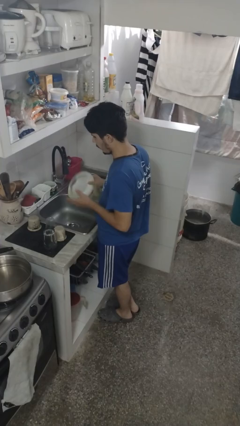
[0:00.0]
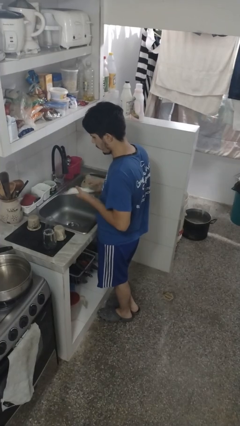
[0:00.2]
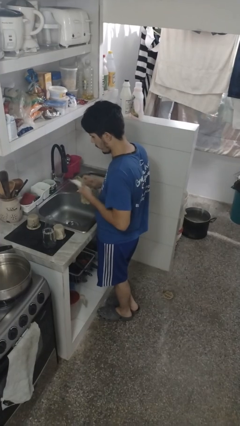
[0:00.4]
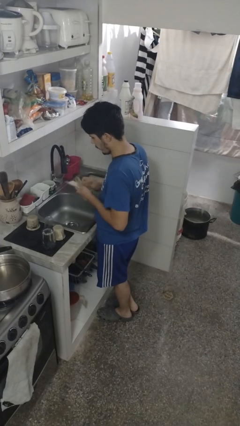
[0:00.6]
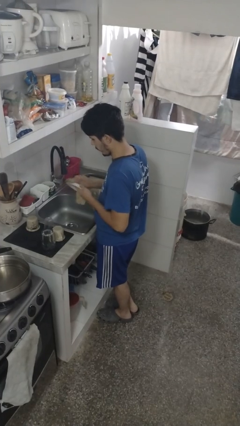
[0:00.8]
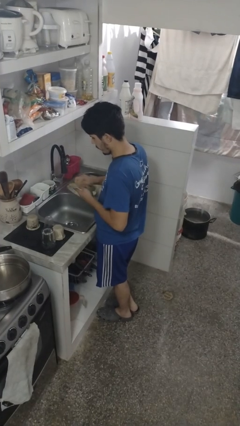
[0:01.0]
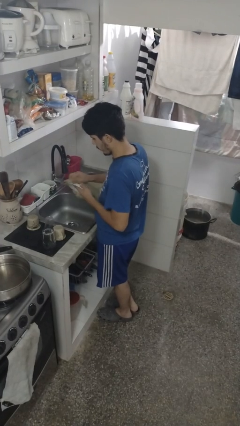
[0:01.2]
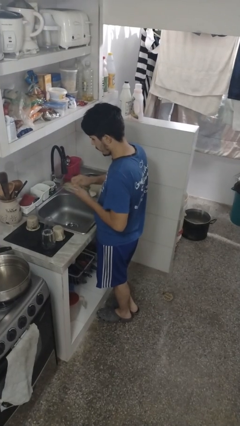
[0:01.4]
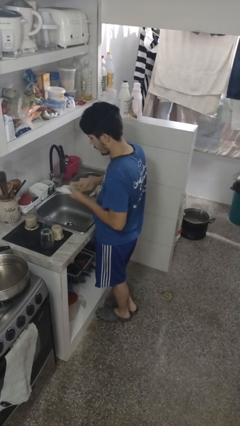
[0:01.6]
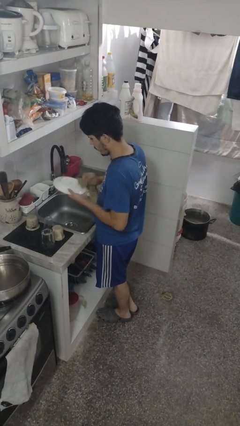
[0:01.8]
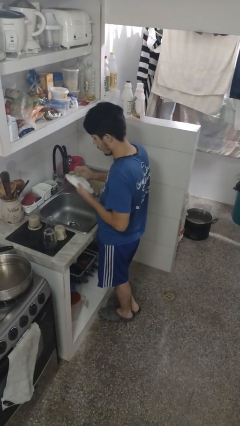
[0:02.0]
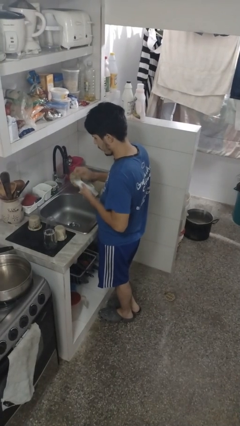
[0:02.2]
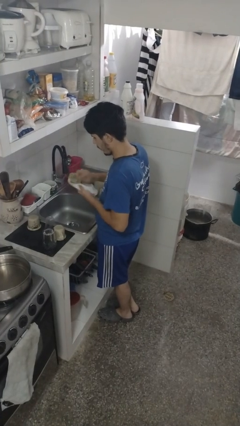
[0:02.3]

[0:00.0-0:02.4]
person dries dish

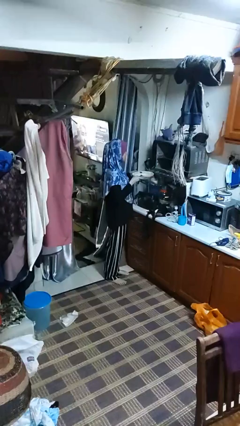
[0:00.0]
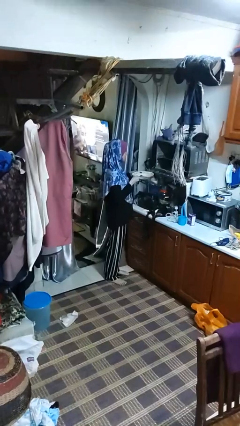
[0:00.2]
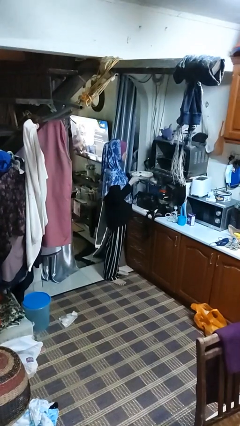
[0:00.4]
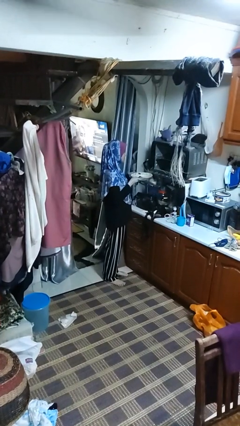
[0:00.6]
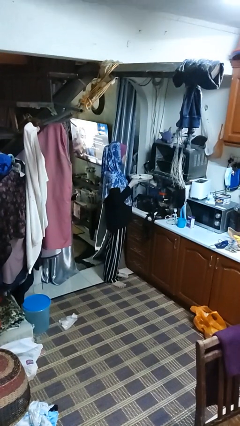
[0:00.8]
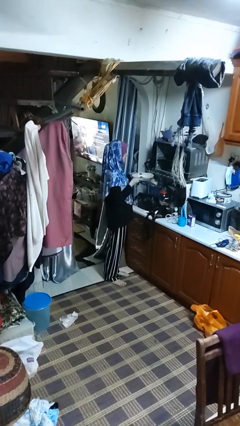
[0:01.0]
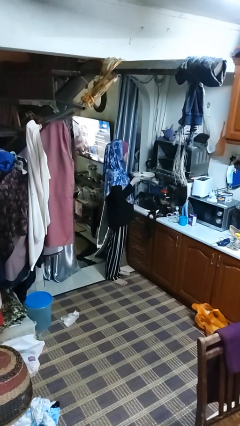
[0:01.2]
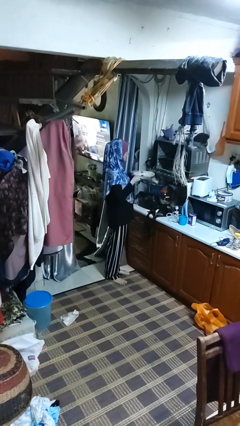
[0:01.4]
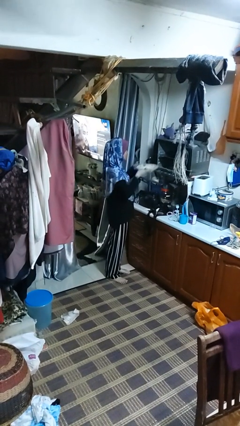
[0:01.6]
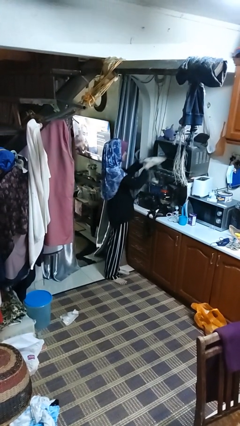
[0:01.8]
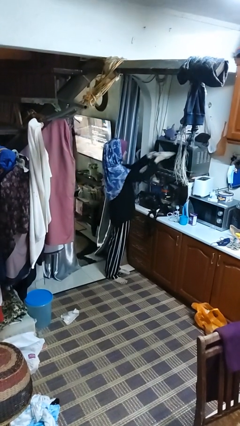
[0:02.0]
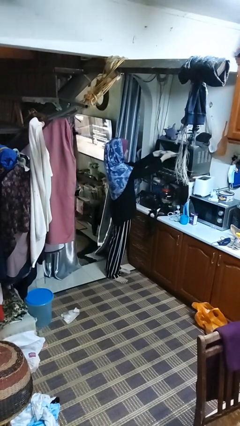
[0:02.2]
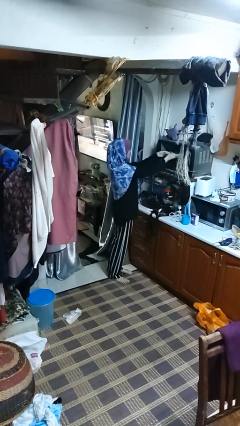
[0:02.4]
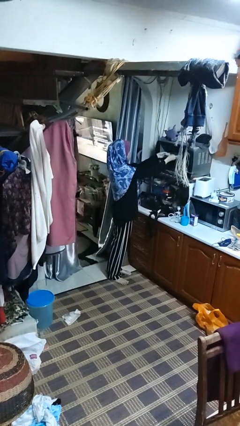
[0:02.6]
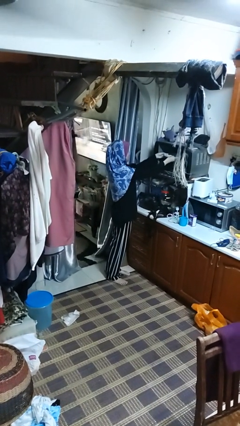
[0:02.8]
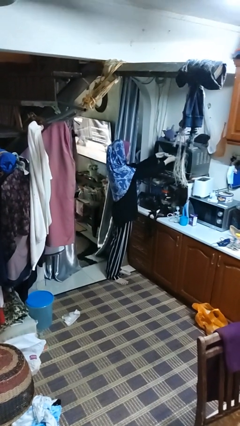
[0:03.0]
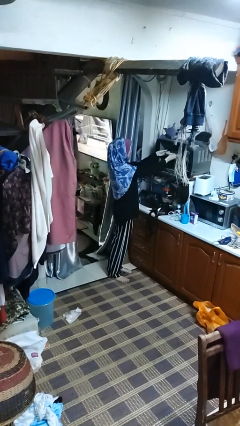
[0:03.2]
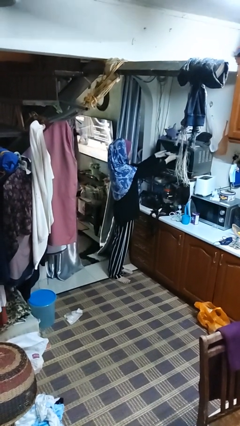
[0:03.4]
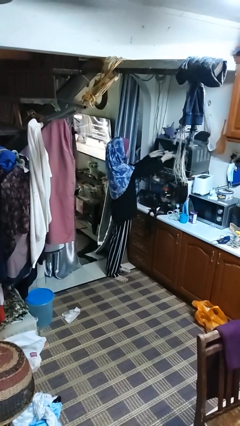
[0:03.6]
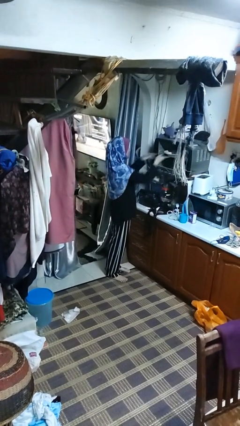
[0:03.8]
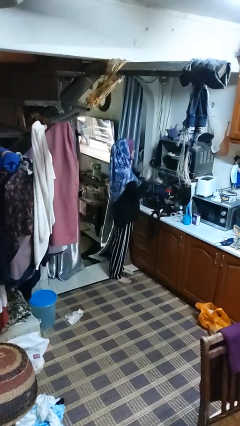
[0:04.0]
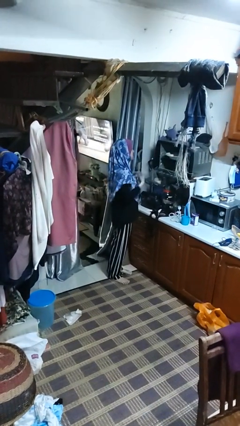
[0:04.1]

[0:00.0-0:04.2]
person puts object into oven

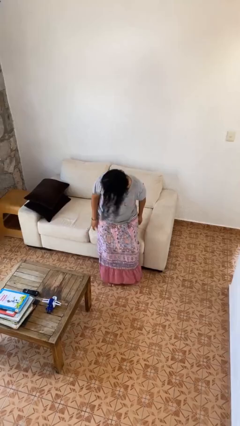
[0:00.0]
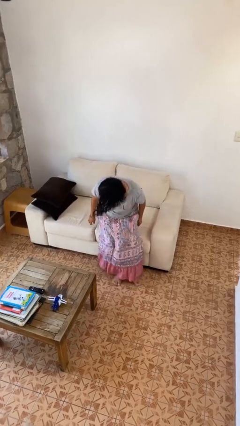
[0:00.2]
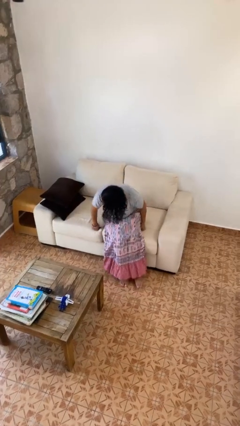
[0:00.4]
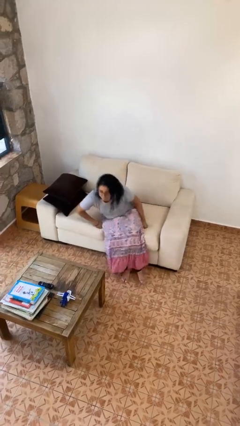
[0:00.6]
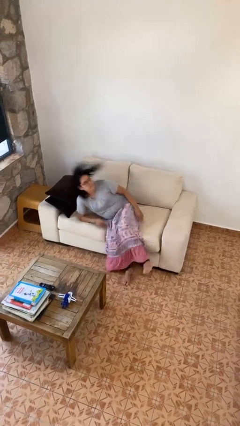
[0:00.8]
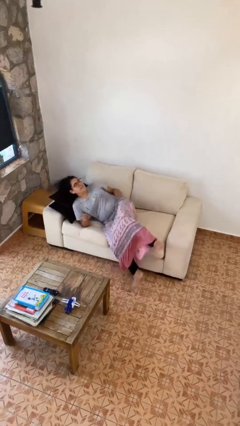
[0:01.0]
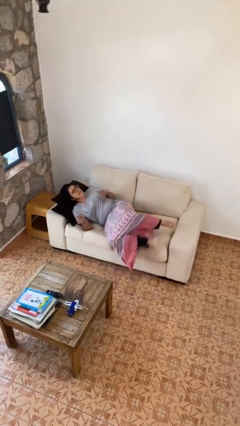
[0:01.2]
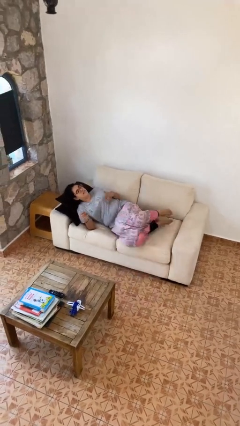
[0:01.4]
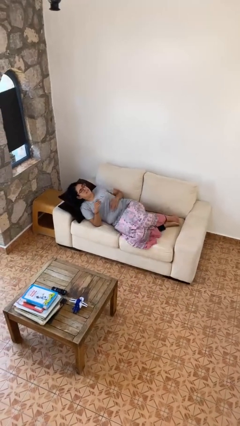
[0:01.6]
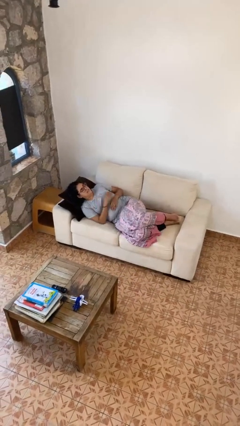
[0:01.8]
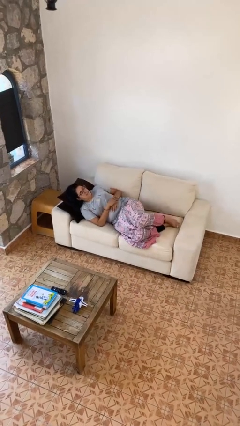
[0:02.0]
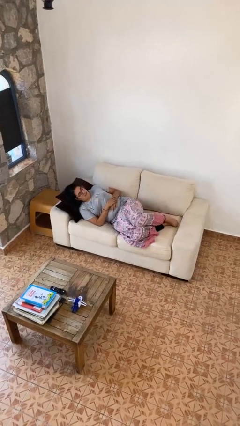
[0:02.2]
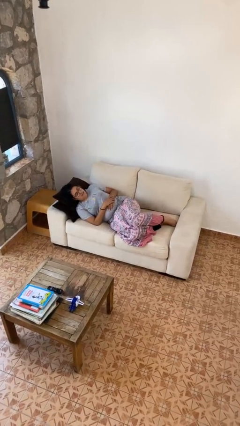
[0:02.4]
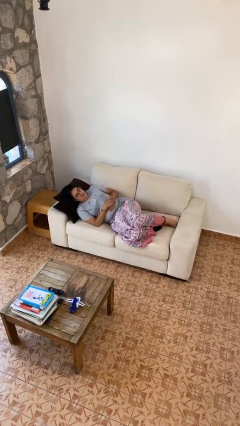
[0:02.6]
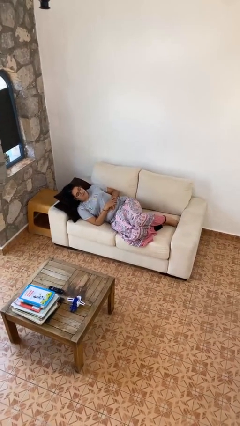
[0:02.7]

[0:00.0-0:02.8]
person lies down on couch

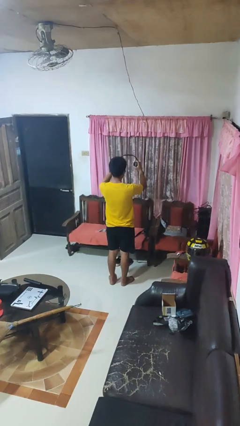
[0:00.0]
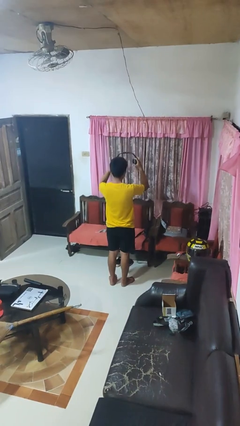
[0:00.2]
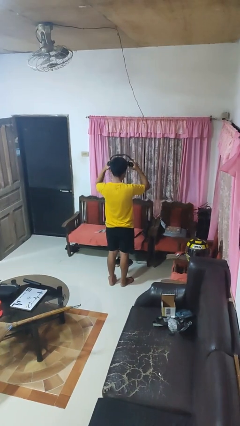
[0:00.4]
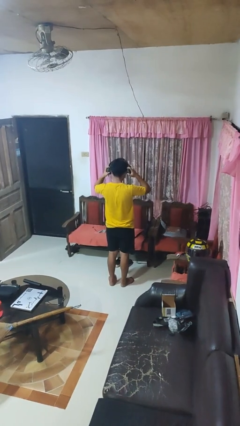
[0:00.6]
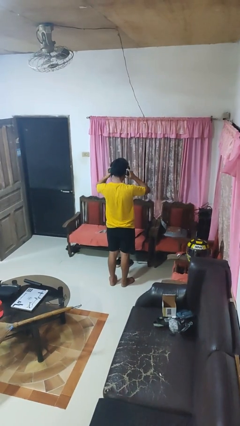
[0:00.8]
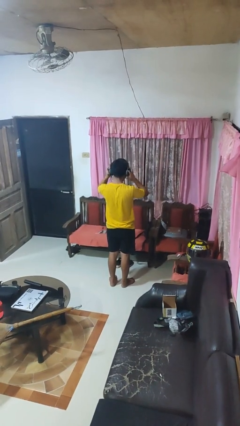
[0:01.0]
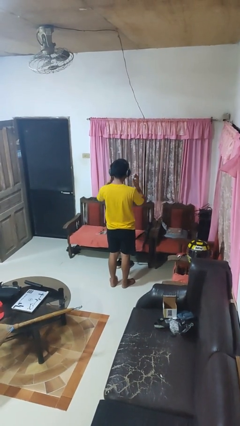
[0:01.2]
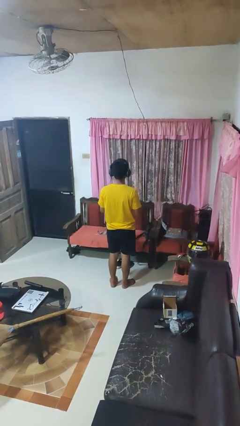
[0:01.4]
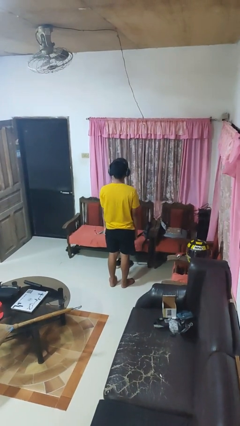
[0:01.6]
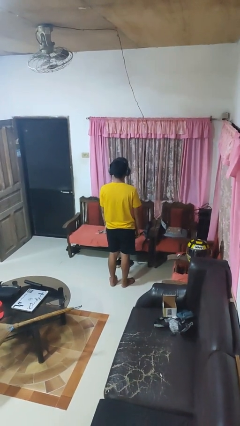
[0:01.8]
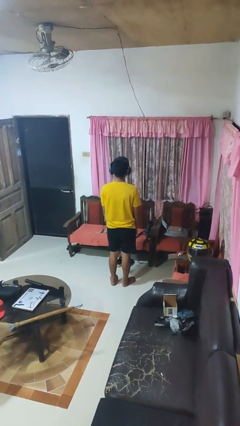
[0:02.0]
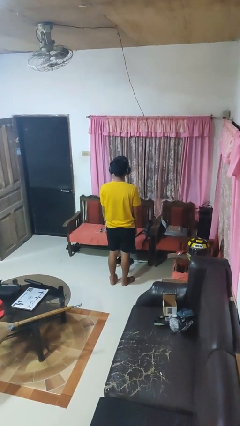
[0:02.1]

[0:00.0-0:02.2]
person puts on headphones

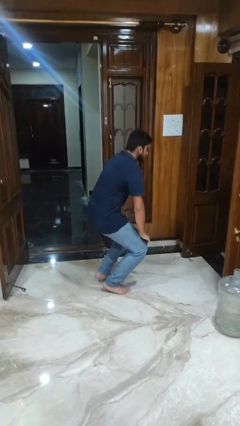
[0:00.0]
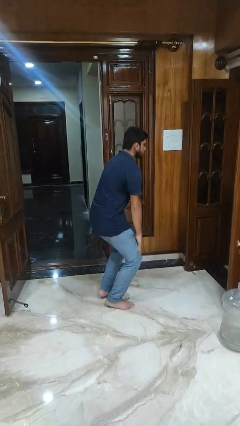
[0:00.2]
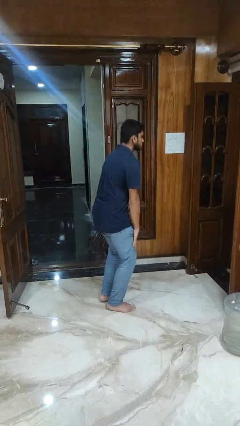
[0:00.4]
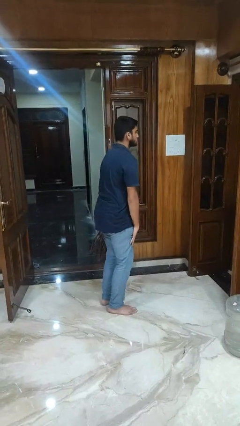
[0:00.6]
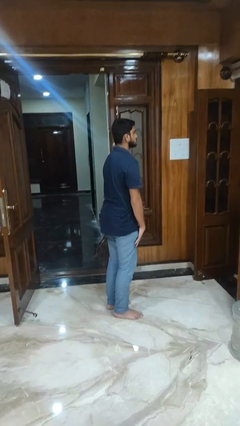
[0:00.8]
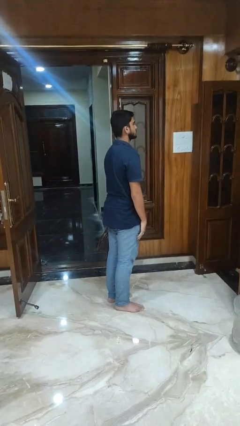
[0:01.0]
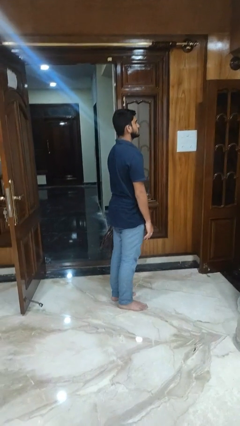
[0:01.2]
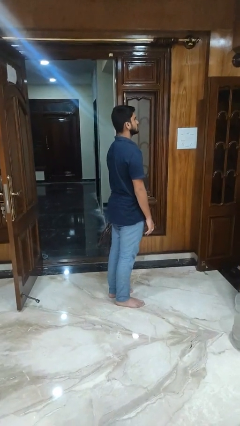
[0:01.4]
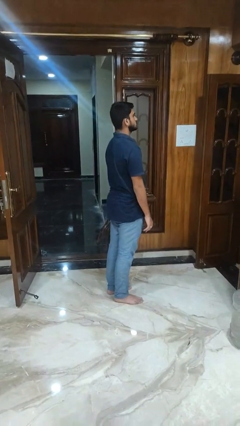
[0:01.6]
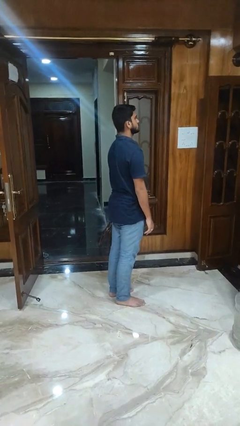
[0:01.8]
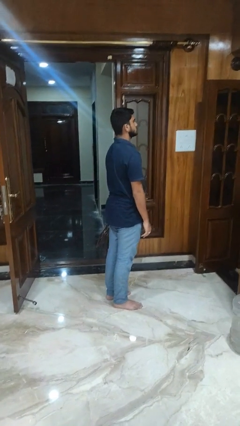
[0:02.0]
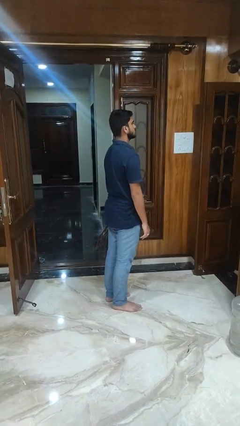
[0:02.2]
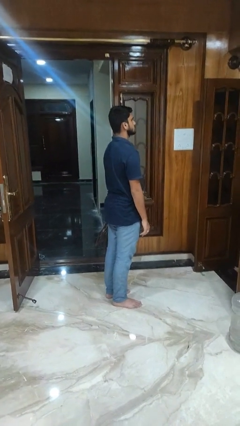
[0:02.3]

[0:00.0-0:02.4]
person stands up

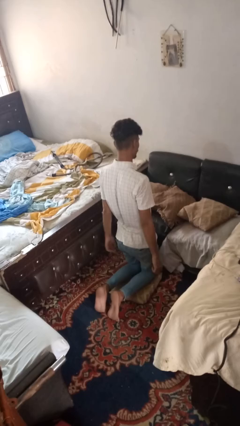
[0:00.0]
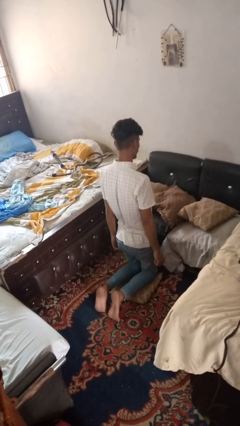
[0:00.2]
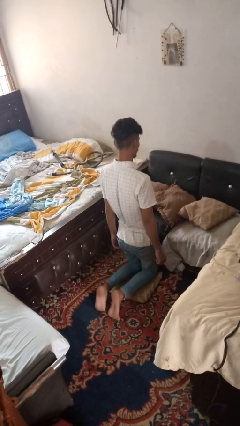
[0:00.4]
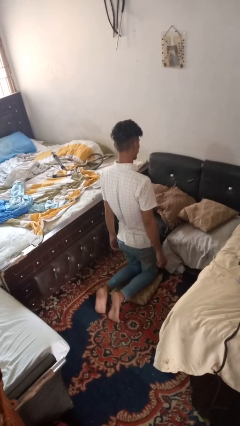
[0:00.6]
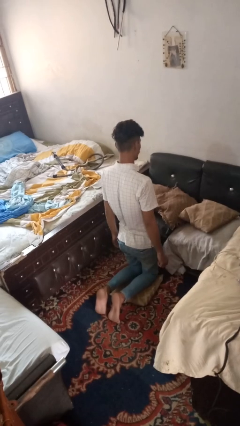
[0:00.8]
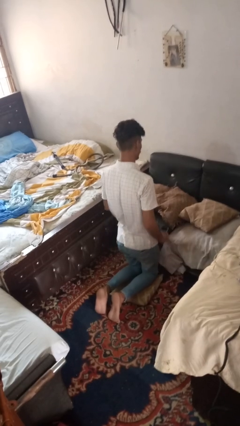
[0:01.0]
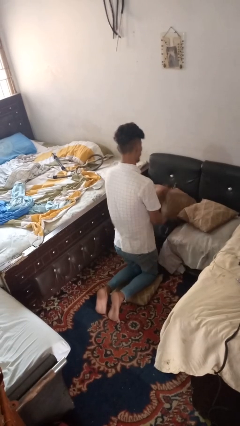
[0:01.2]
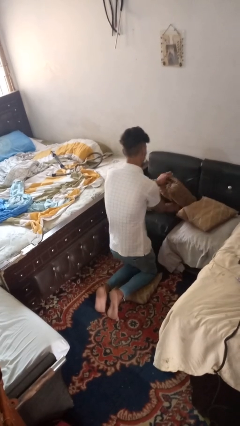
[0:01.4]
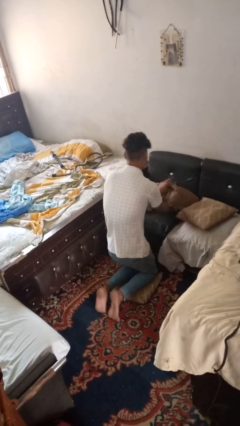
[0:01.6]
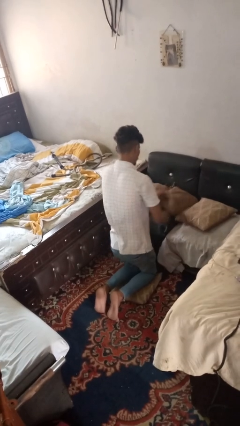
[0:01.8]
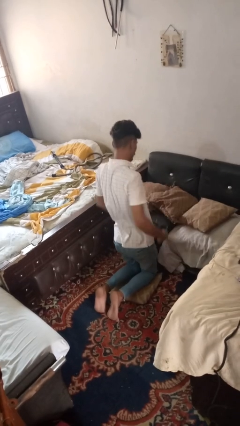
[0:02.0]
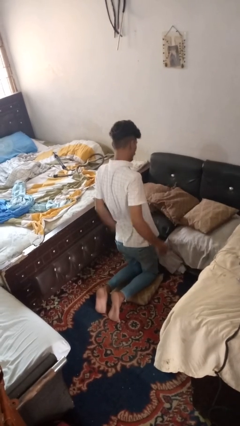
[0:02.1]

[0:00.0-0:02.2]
person searches in couch

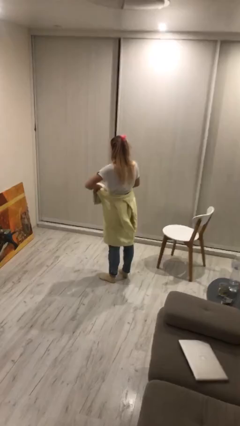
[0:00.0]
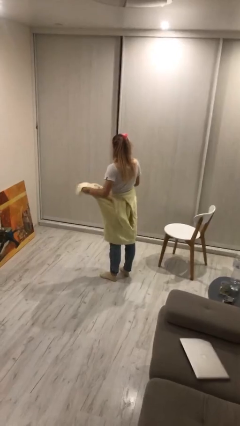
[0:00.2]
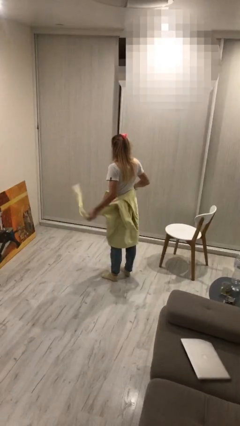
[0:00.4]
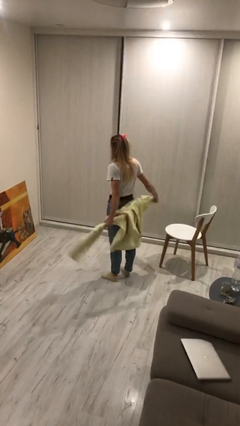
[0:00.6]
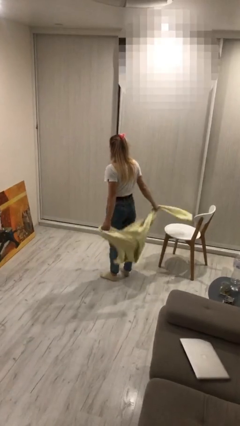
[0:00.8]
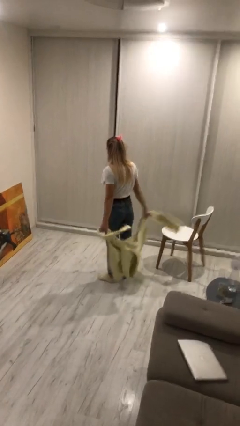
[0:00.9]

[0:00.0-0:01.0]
person unties jacket around waist
